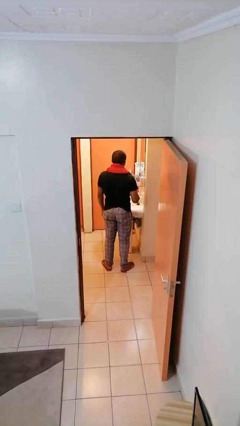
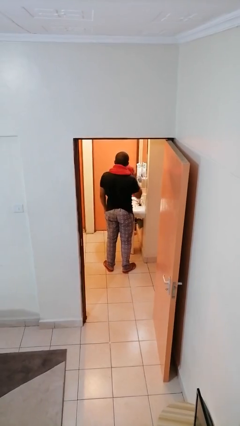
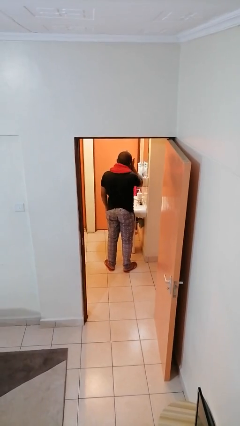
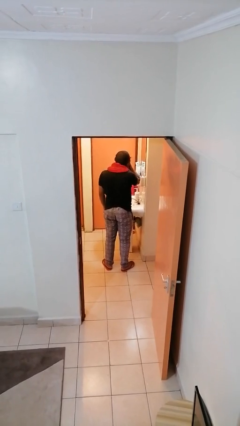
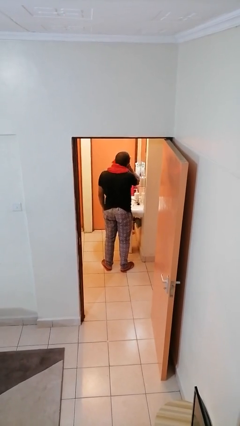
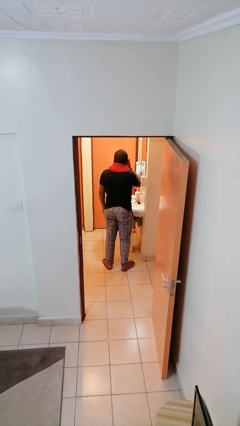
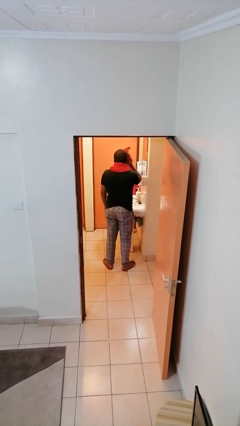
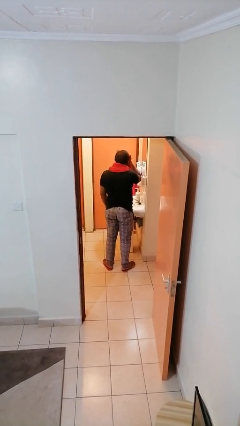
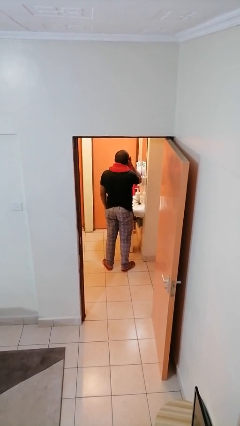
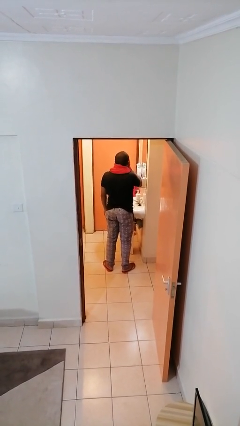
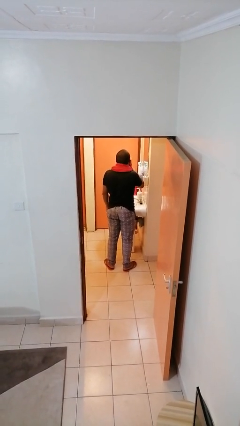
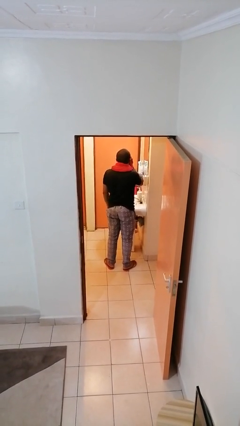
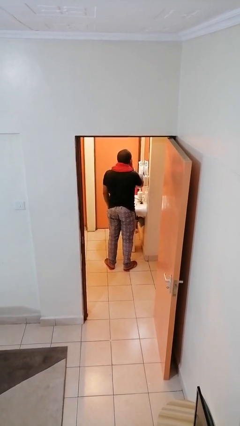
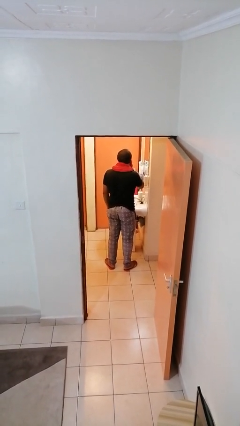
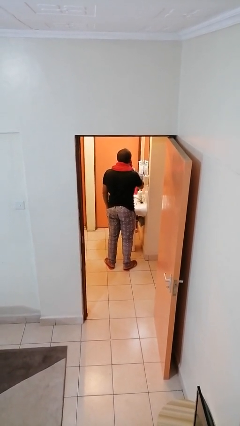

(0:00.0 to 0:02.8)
person dries face with towel

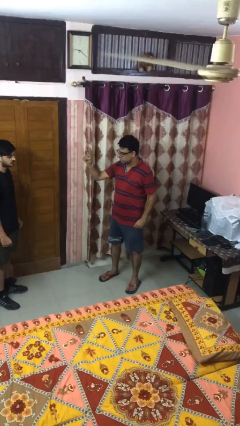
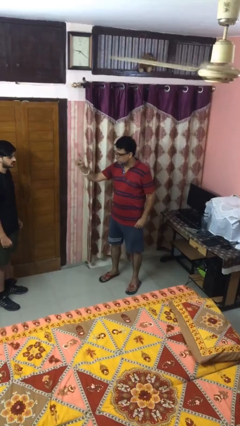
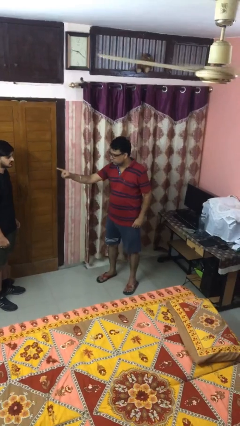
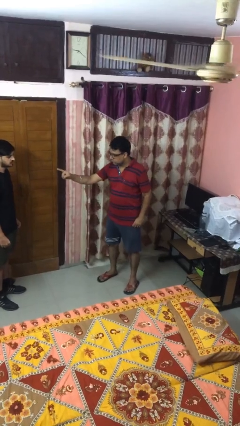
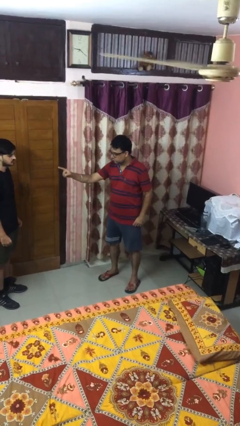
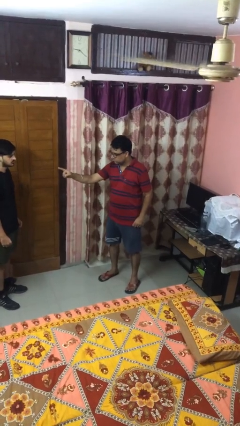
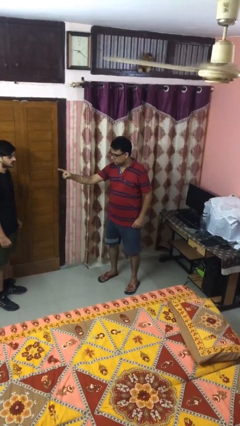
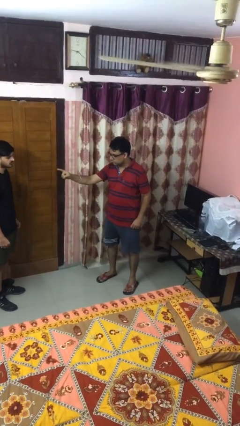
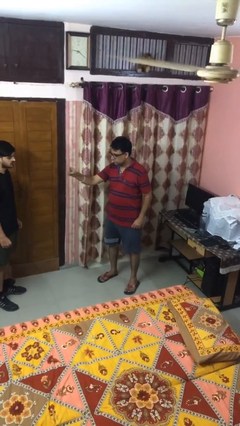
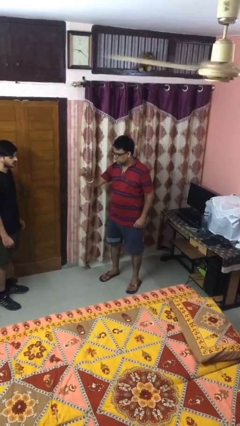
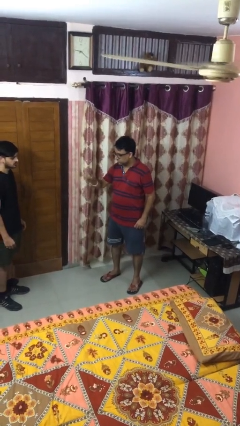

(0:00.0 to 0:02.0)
person points at person

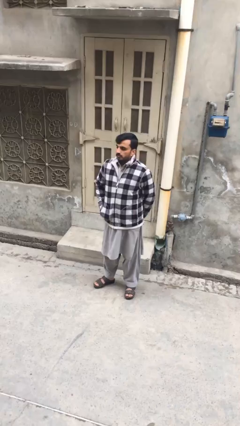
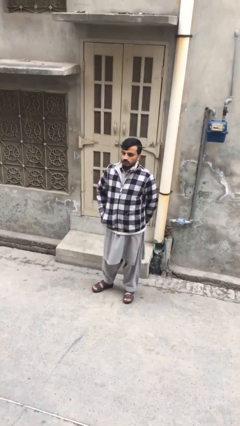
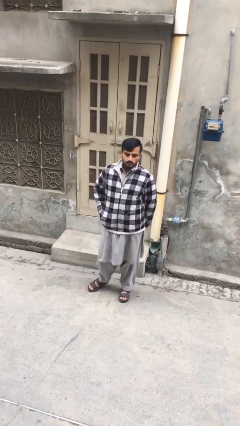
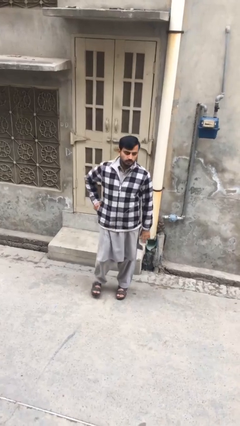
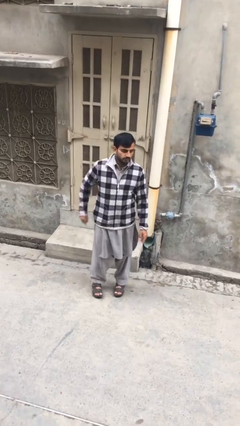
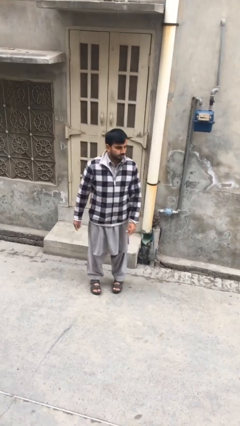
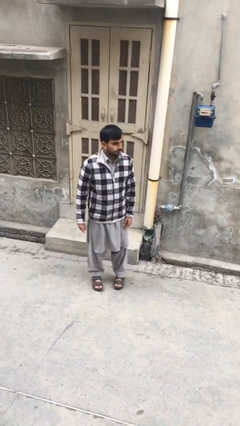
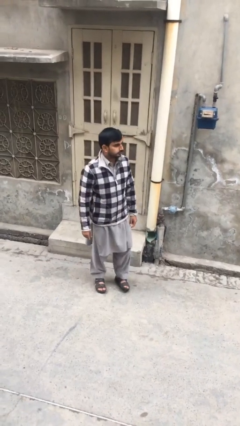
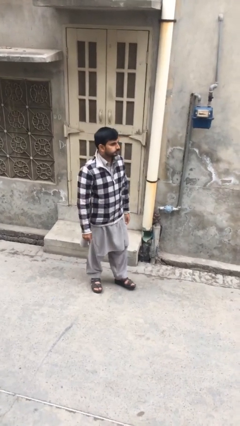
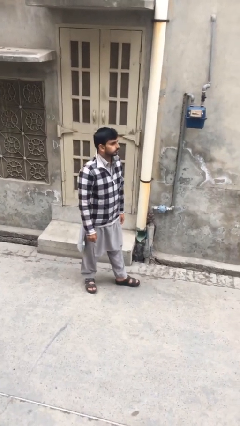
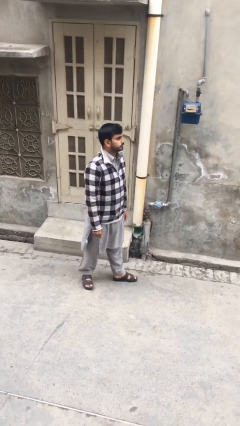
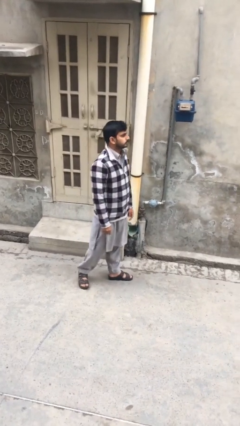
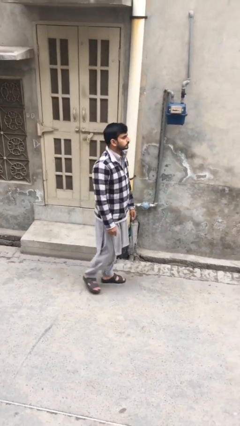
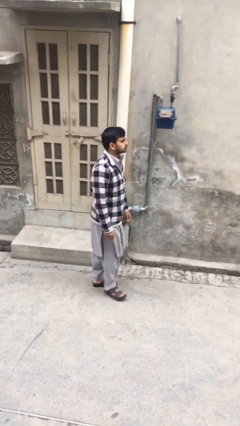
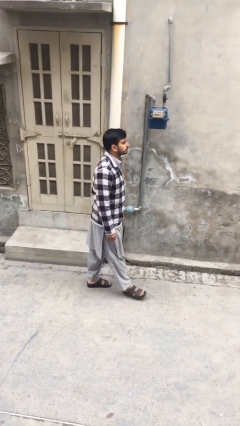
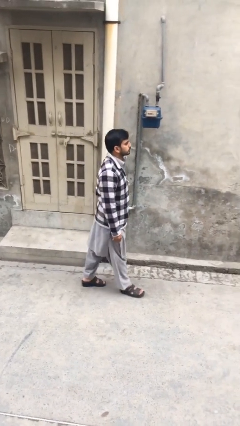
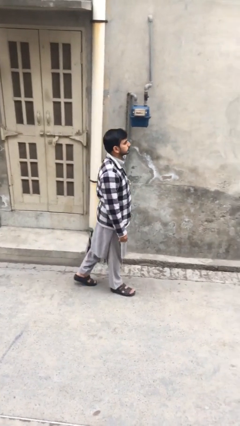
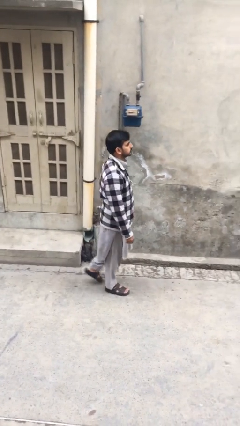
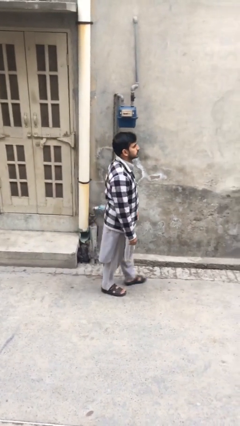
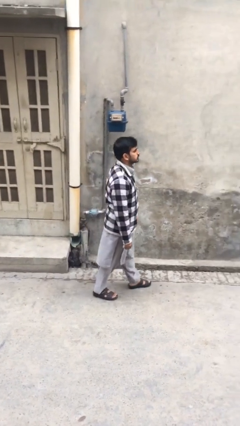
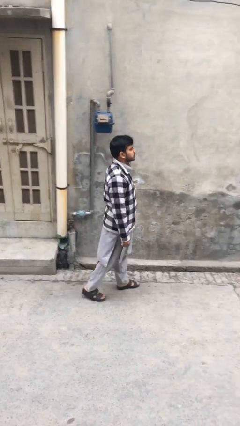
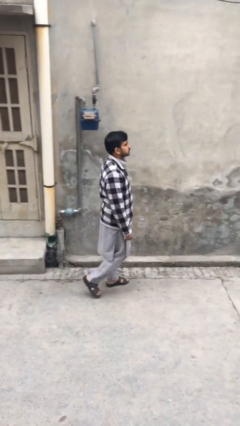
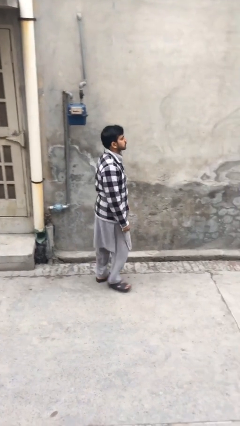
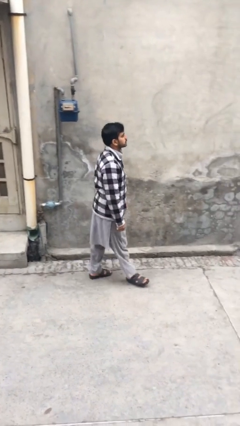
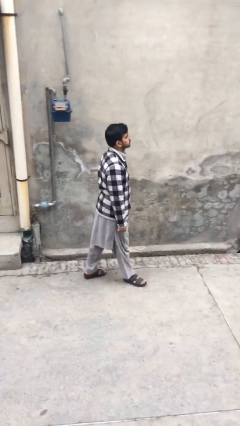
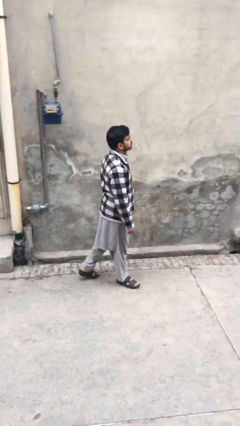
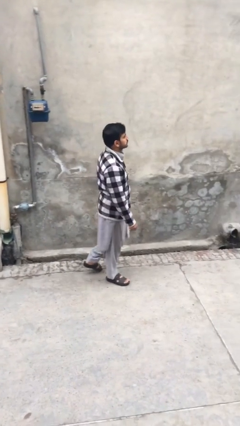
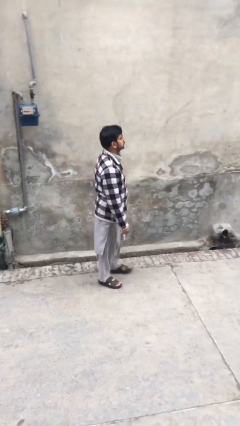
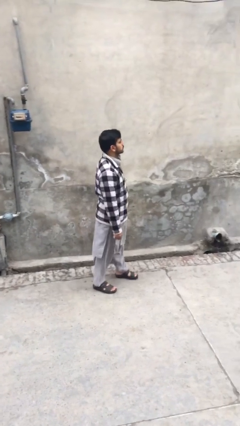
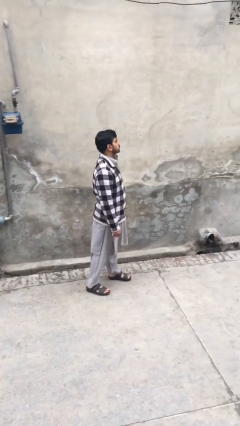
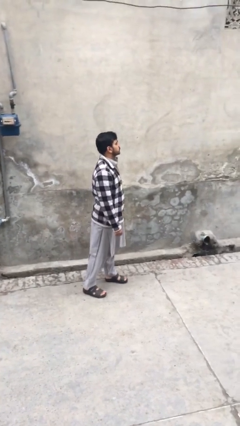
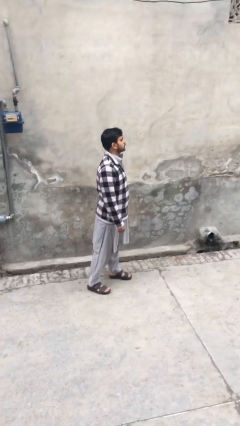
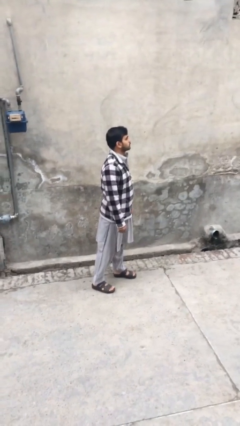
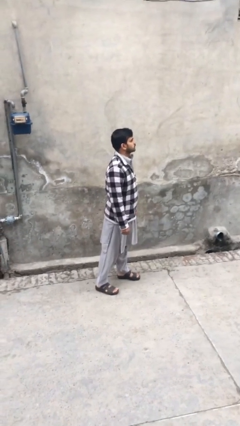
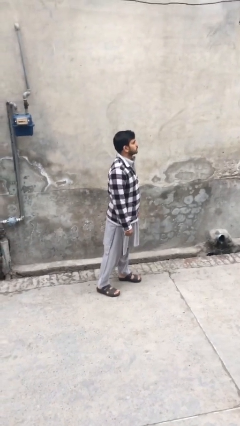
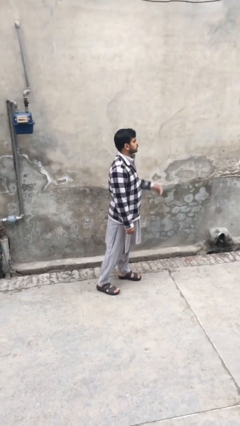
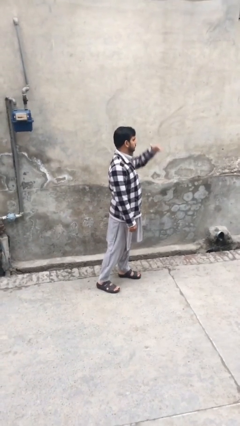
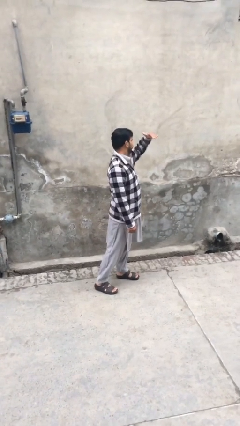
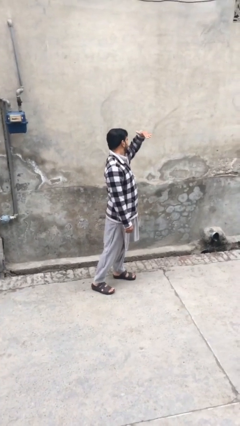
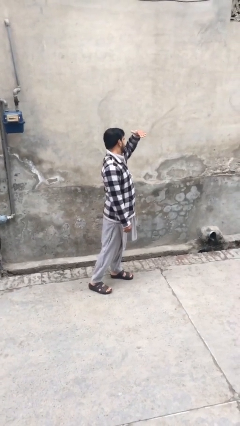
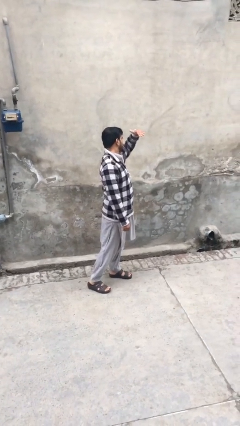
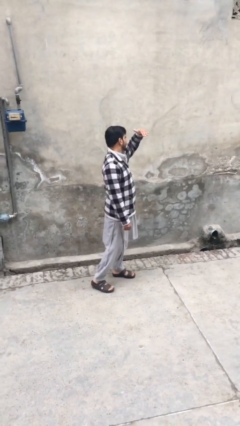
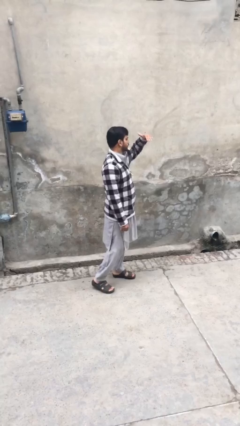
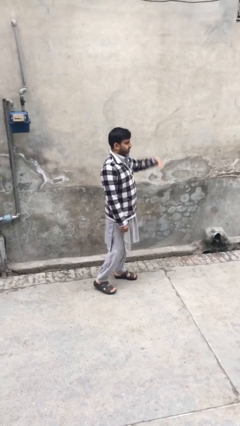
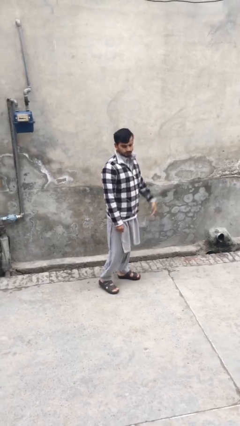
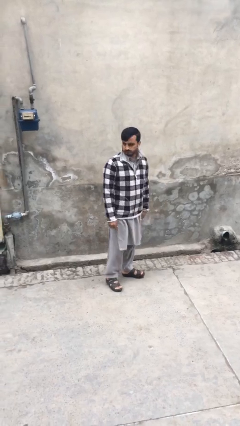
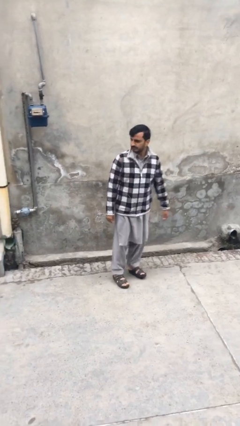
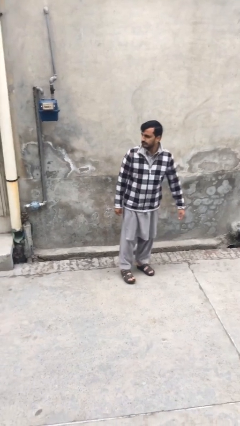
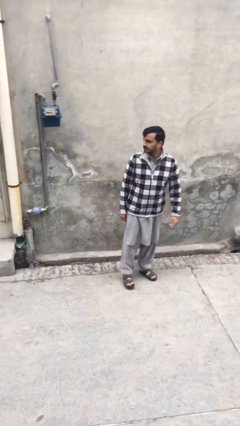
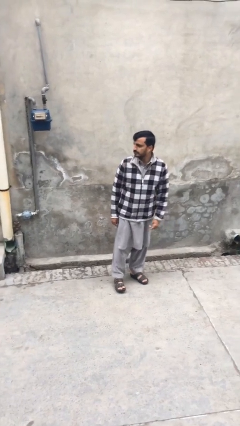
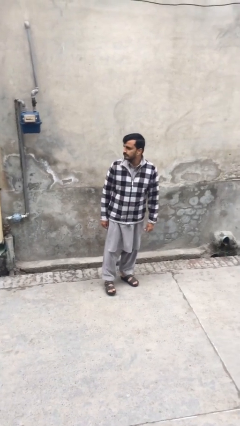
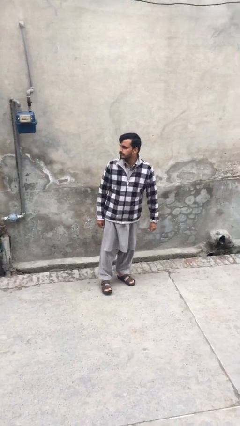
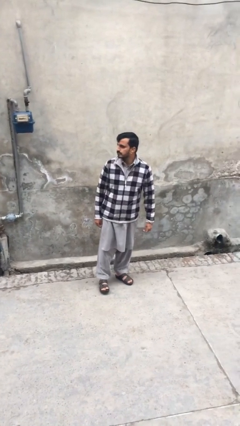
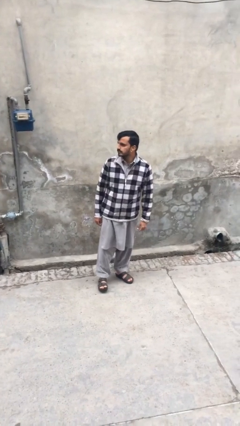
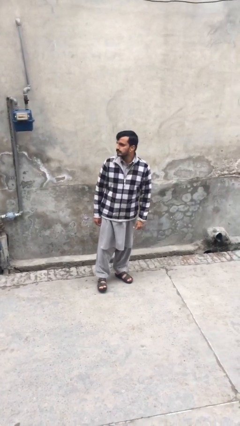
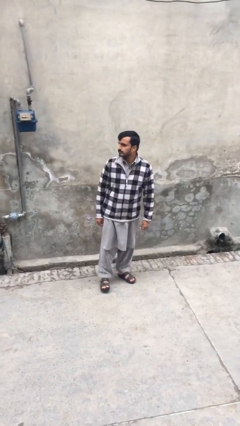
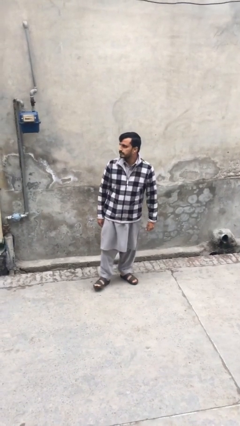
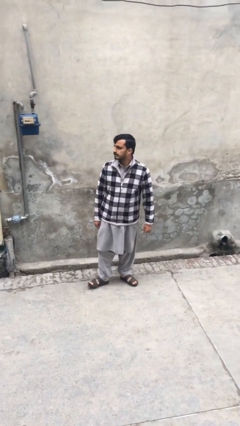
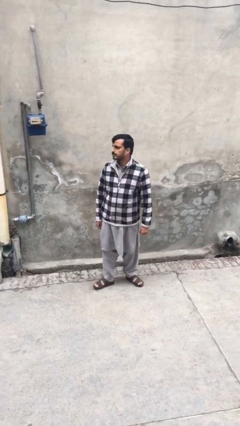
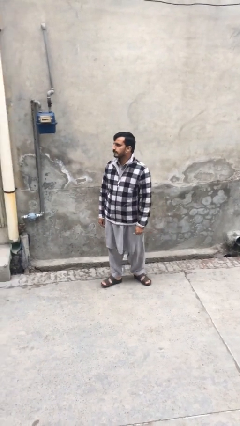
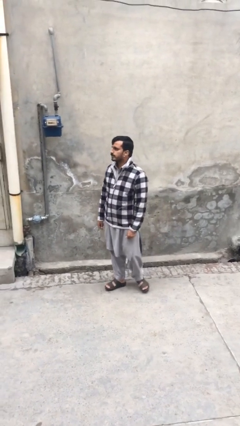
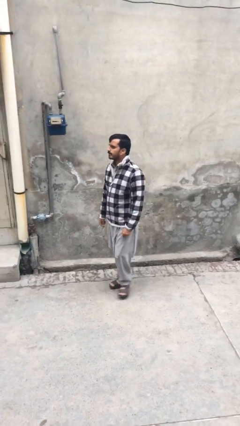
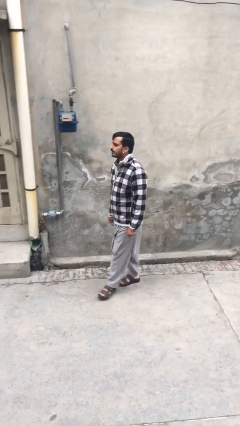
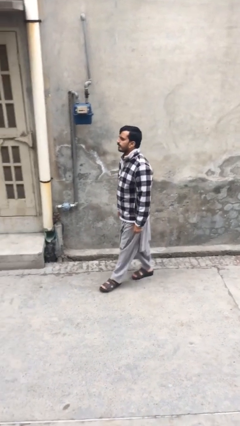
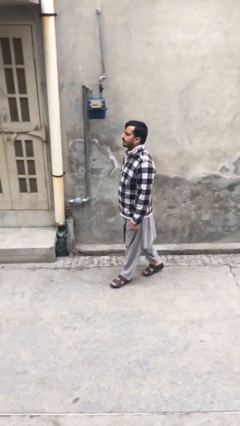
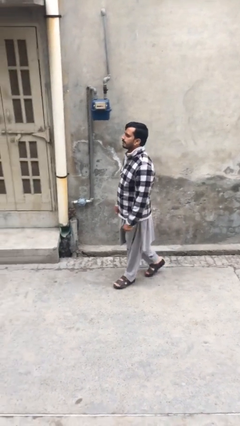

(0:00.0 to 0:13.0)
person walks

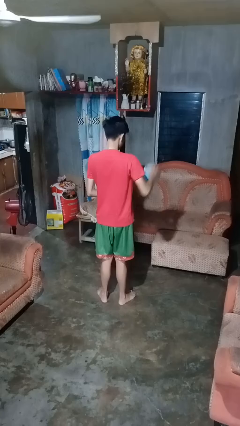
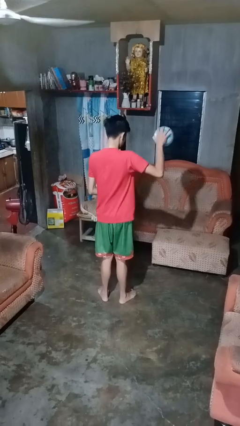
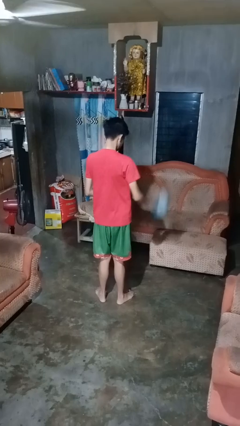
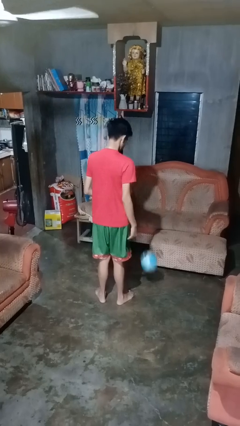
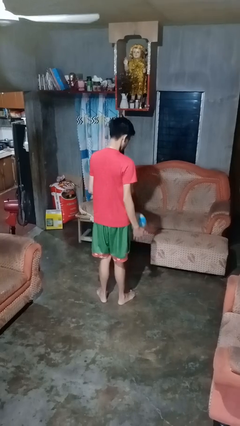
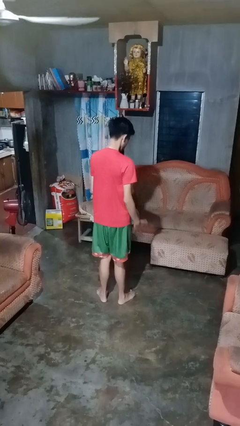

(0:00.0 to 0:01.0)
person bounces ball on floor
